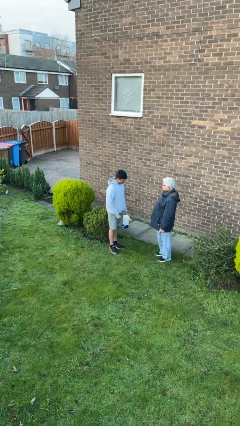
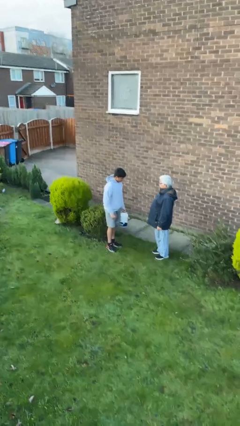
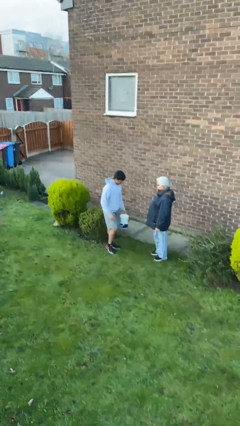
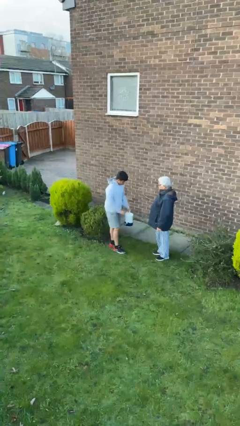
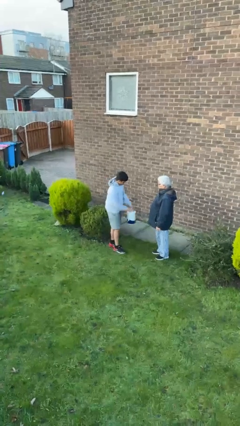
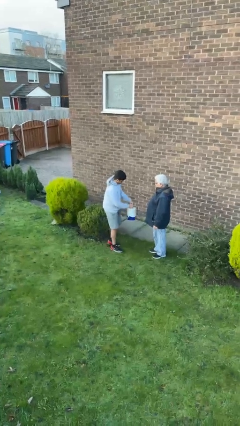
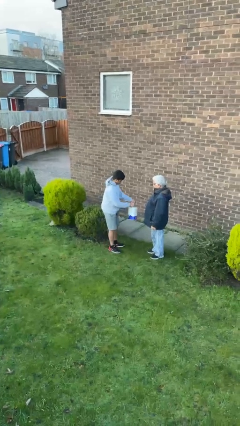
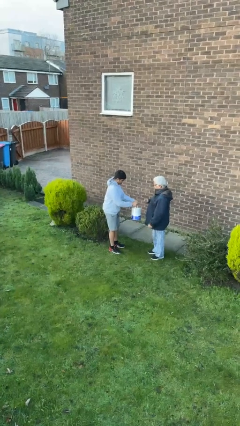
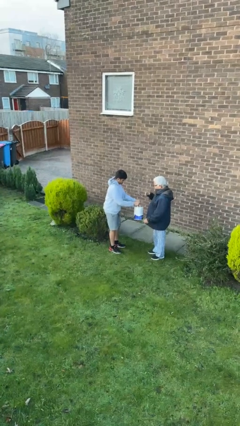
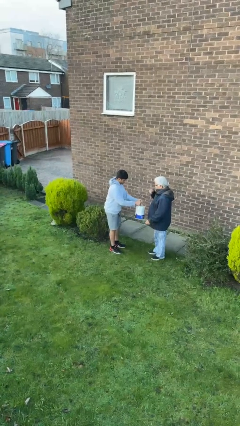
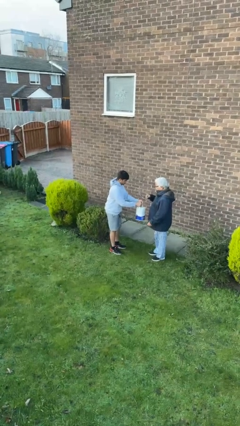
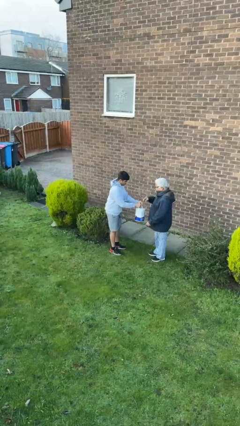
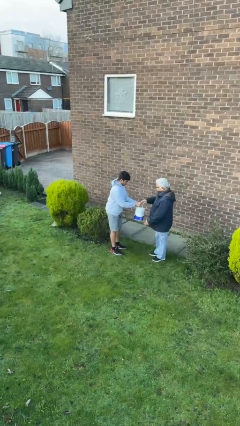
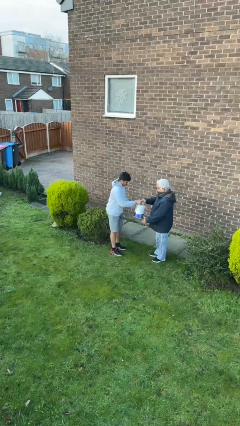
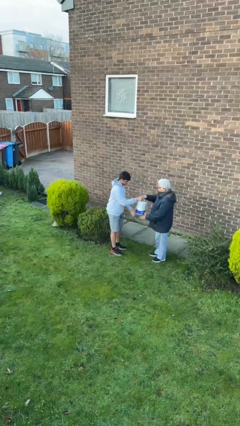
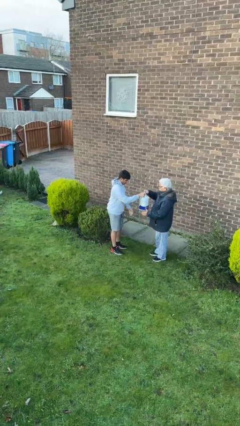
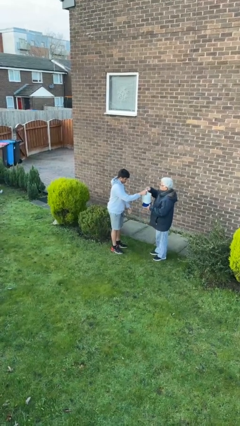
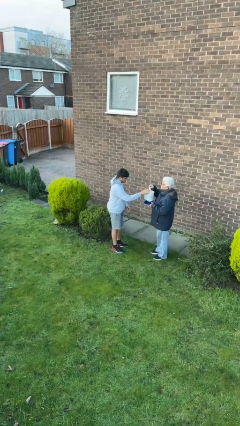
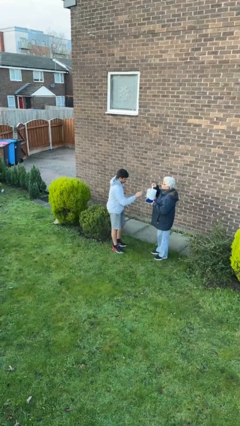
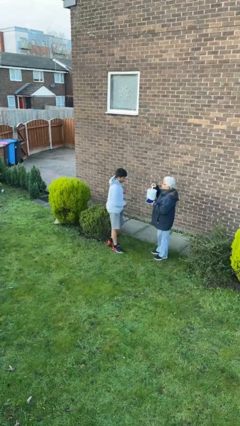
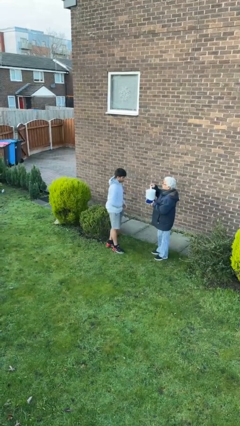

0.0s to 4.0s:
person transfers object to person

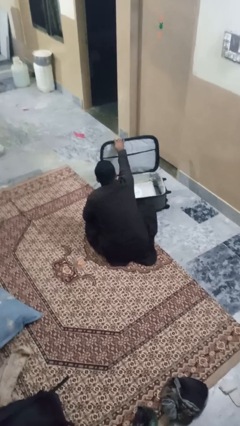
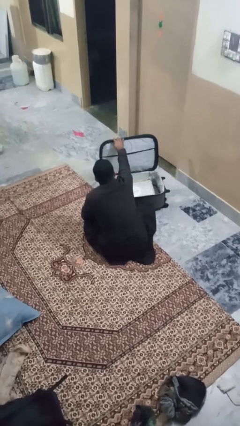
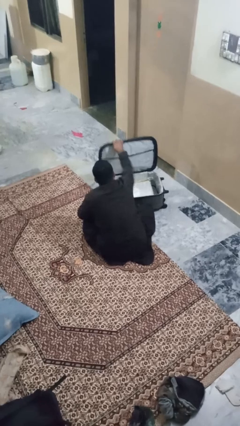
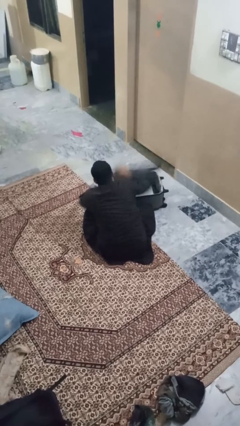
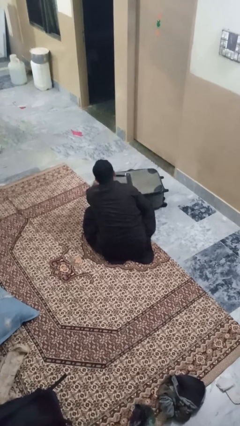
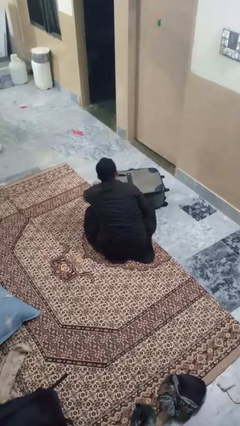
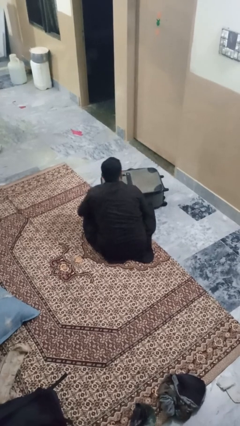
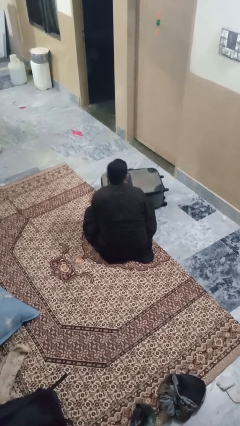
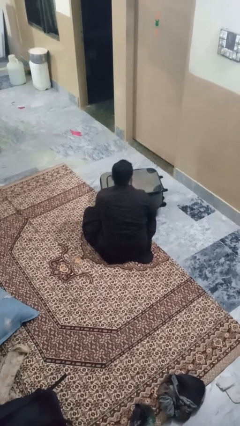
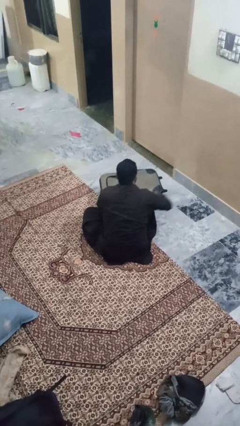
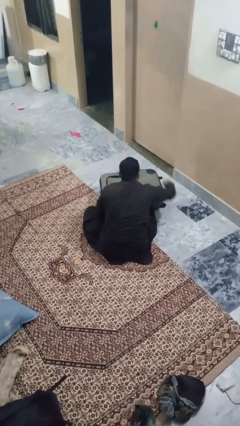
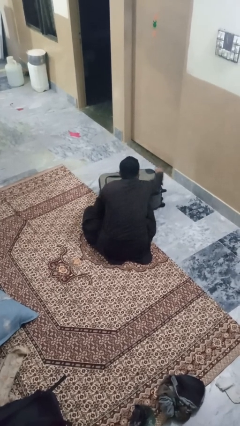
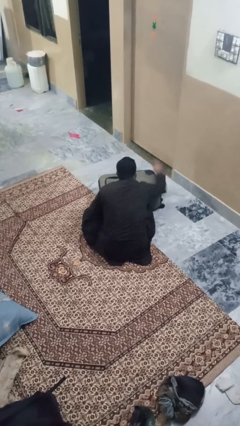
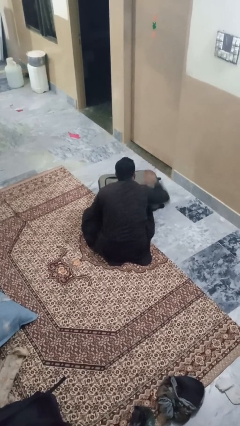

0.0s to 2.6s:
person closes suitcase

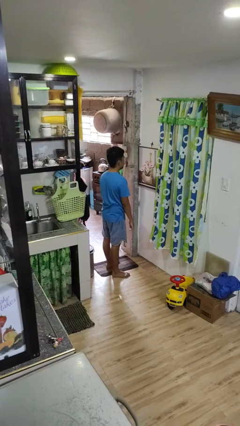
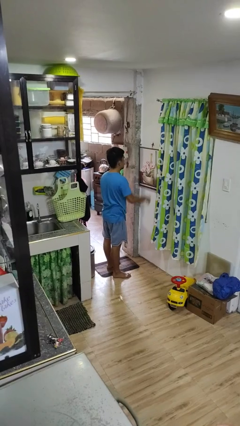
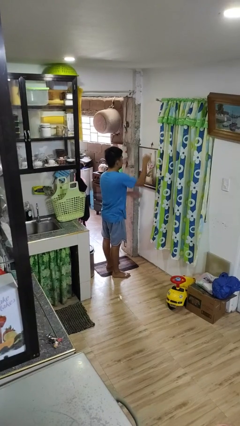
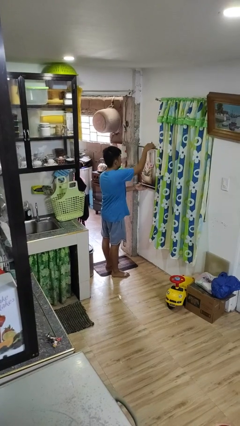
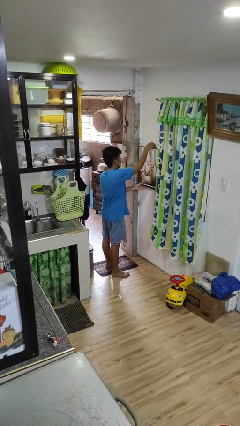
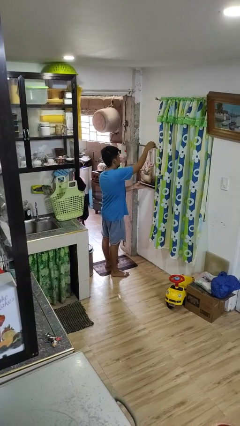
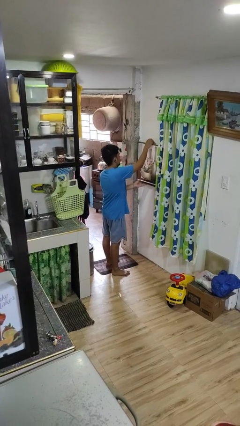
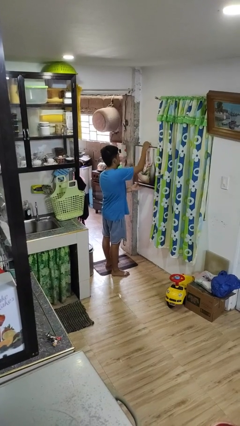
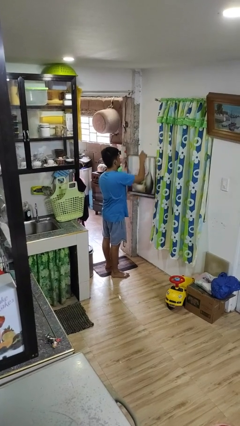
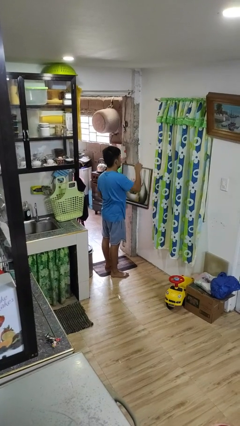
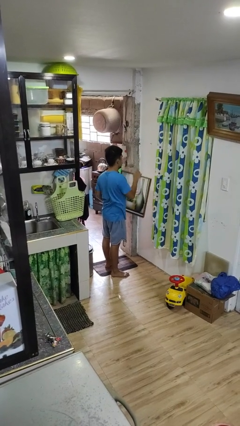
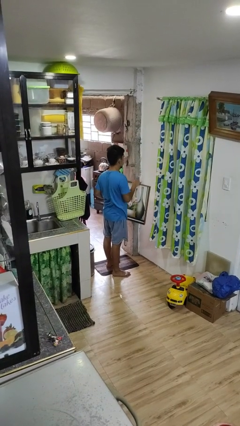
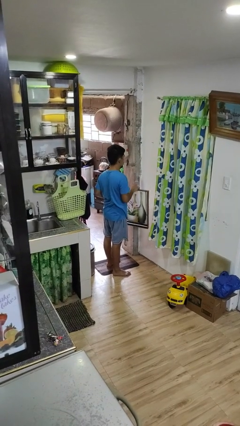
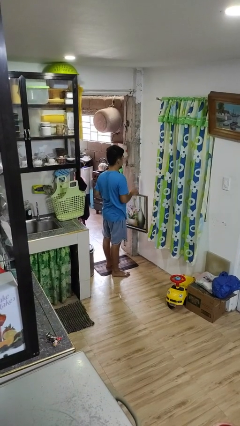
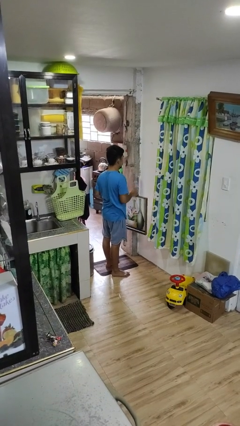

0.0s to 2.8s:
person takes down picture frame

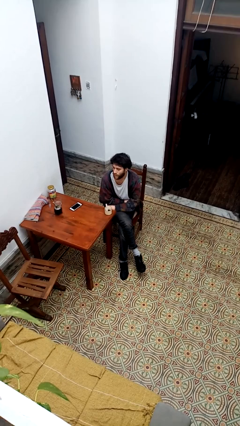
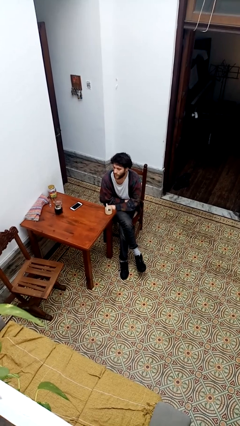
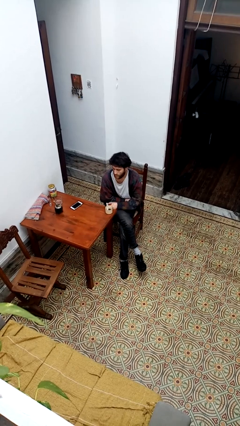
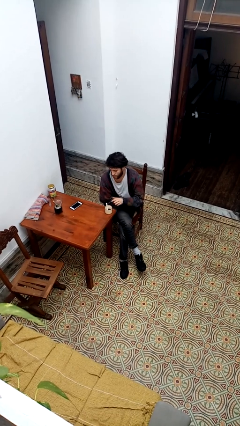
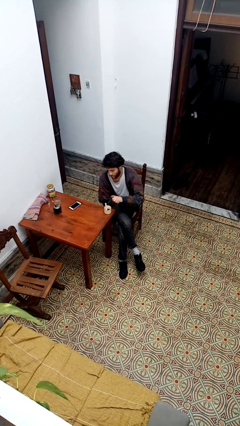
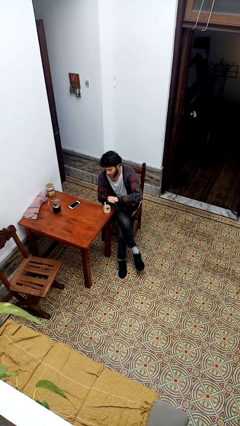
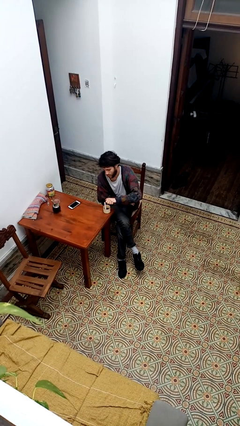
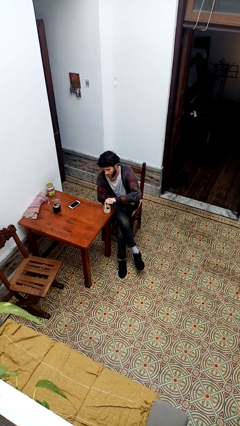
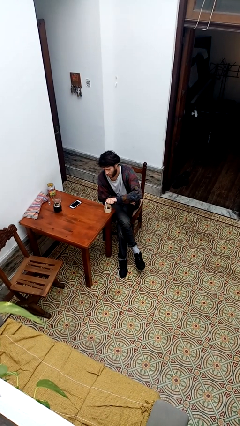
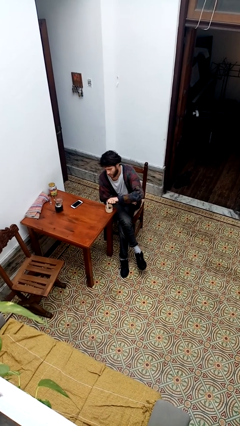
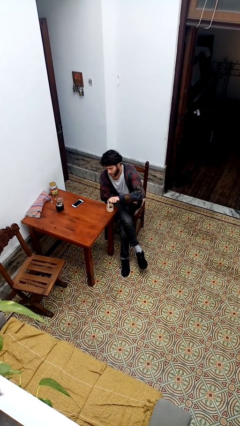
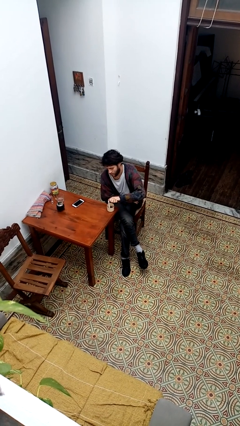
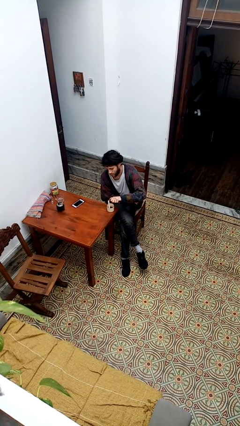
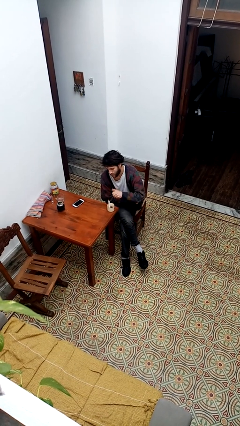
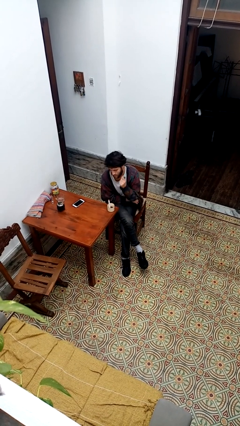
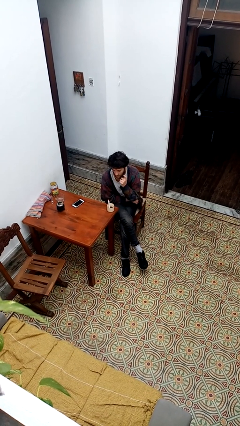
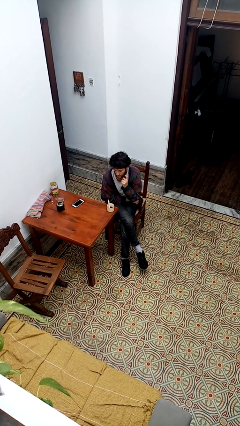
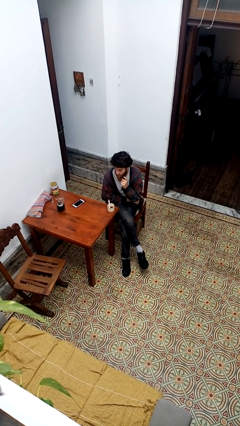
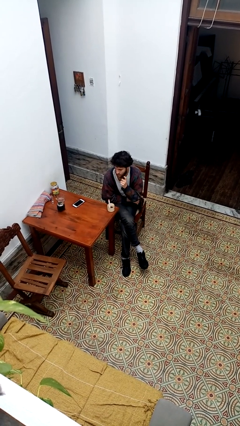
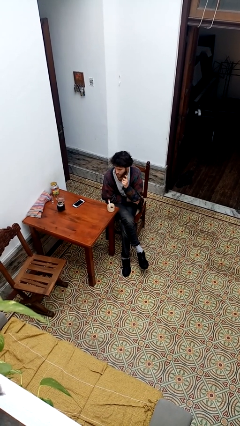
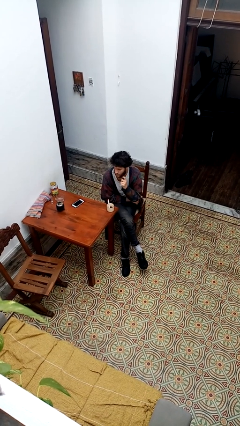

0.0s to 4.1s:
person lights candle

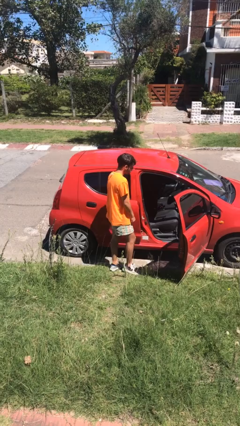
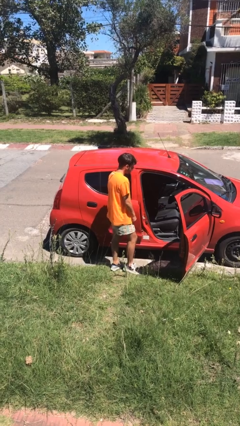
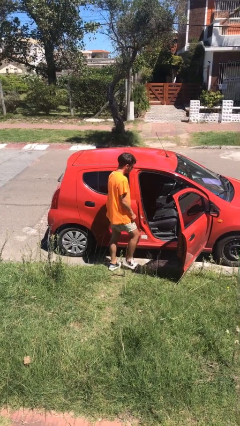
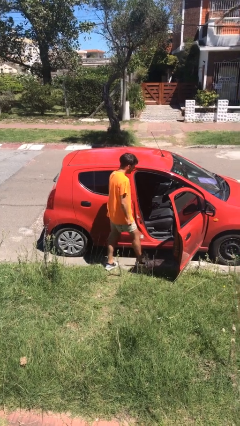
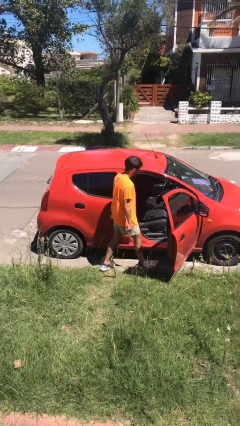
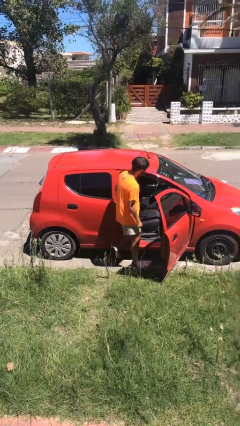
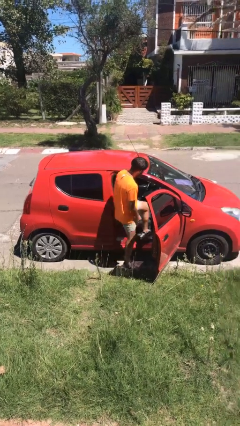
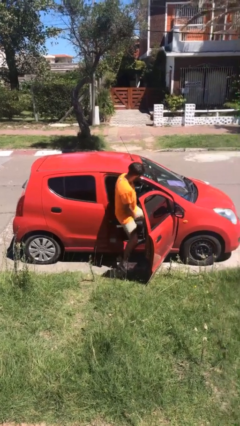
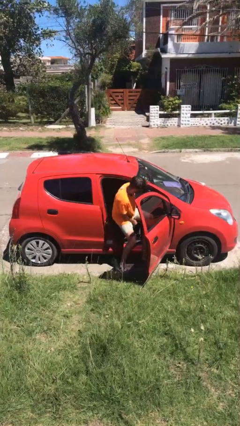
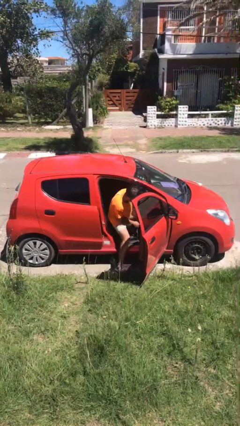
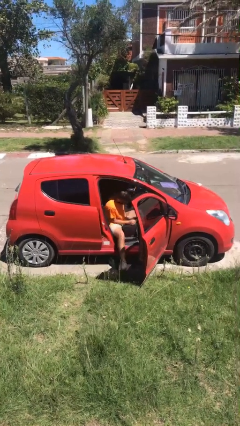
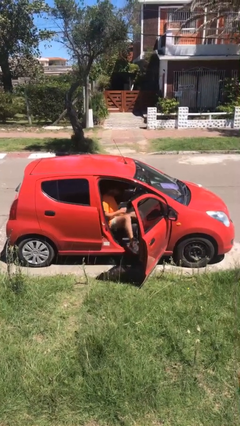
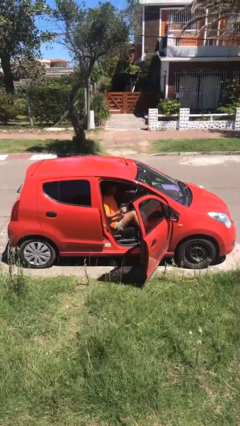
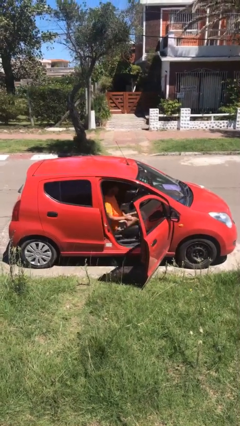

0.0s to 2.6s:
person enters car

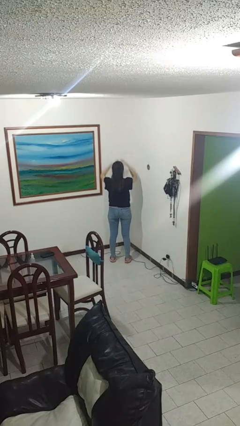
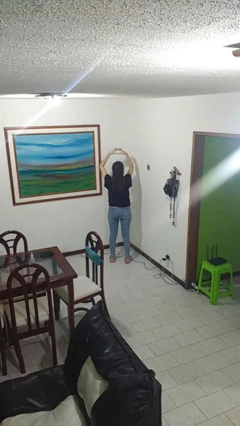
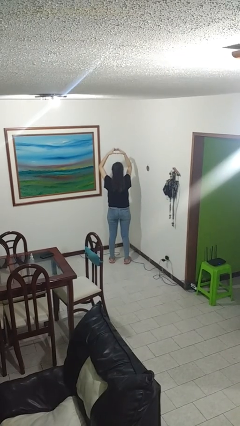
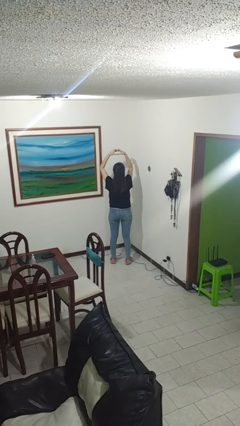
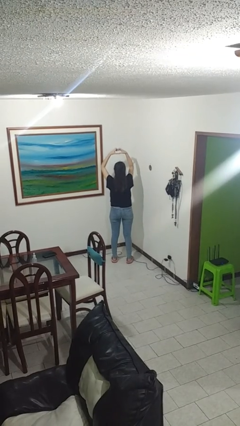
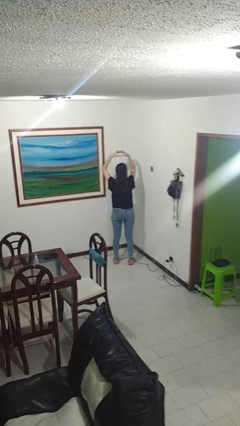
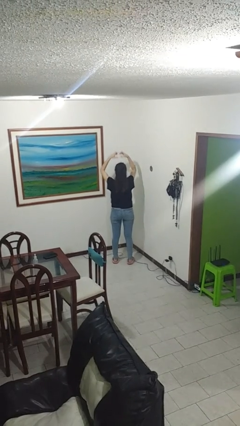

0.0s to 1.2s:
person gestures heart

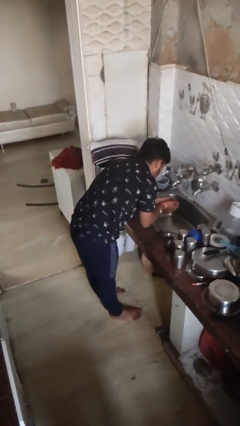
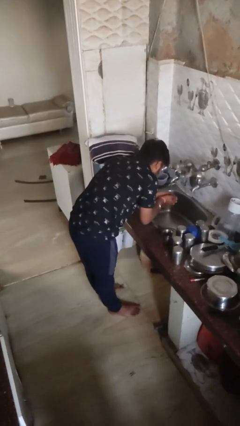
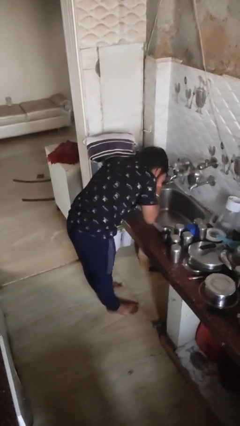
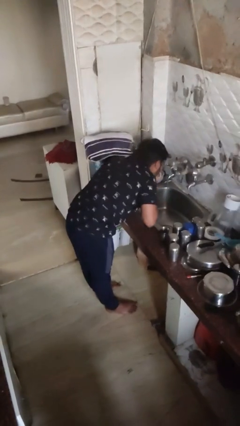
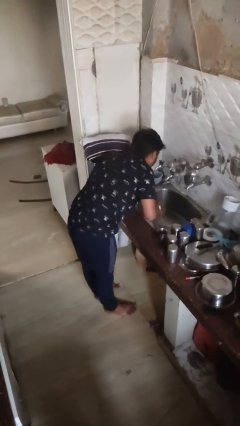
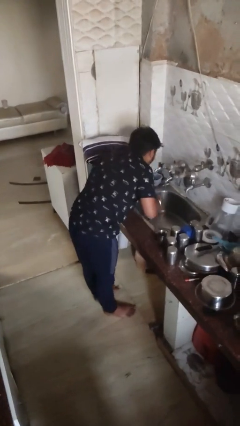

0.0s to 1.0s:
person washes face
